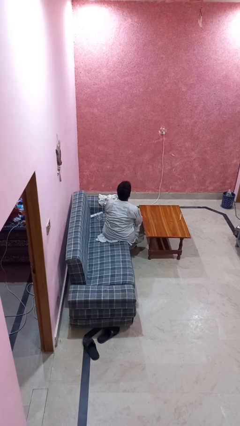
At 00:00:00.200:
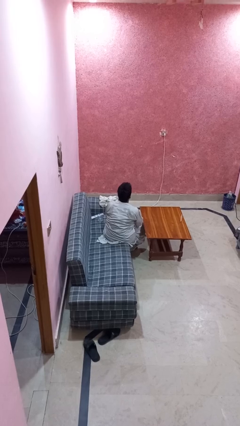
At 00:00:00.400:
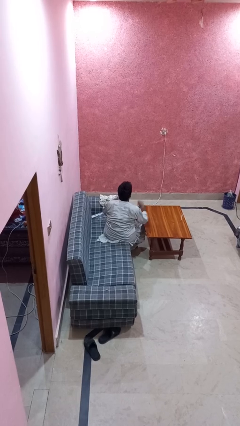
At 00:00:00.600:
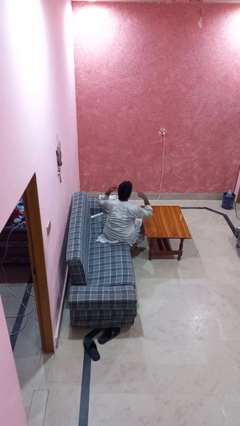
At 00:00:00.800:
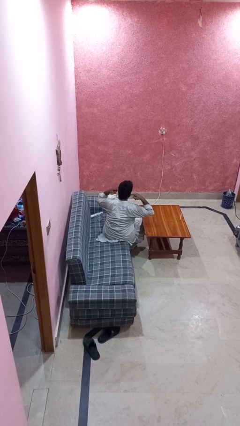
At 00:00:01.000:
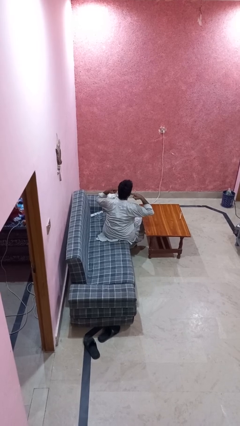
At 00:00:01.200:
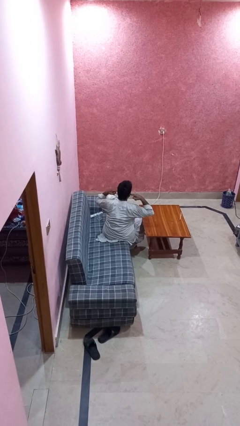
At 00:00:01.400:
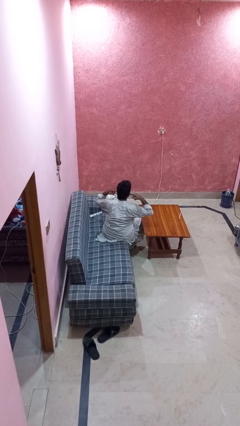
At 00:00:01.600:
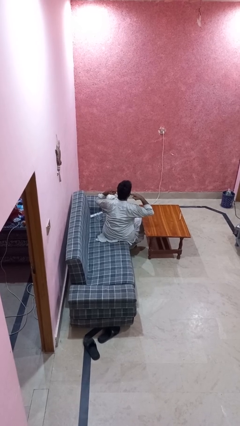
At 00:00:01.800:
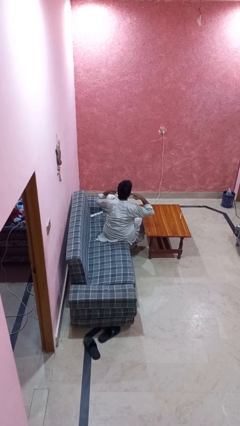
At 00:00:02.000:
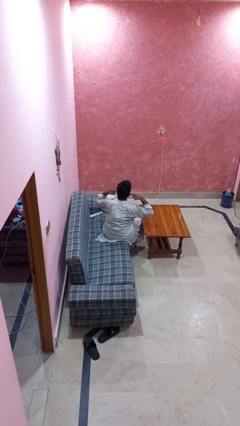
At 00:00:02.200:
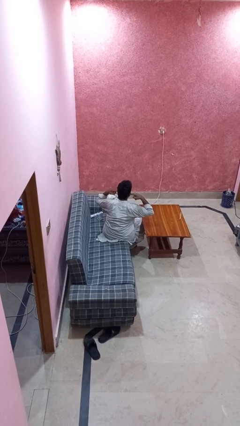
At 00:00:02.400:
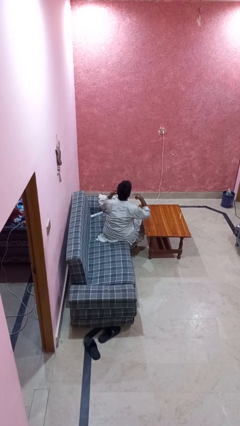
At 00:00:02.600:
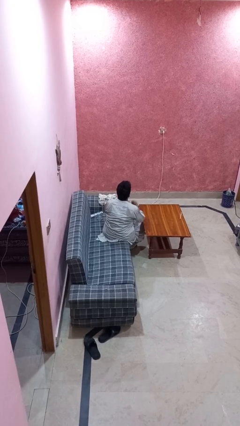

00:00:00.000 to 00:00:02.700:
person puts fingers in ear

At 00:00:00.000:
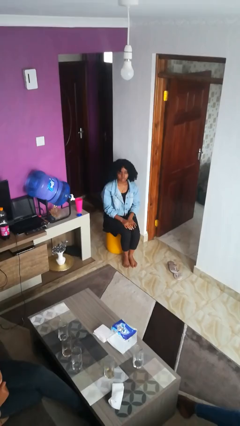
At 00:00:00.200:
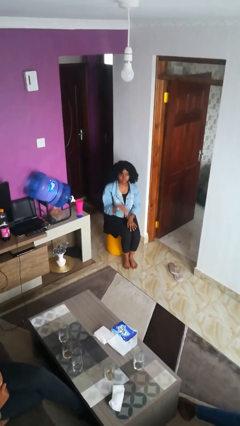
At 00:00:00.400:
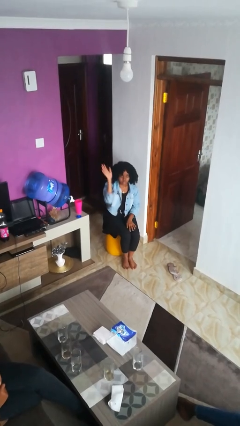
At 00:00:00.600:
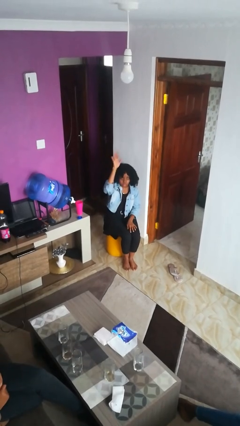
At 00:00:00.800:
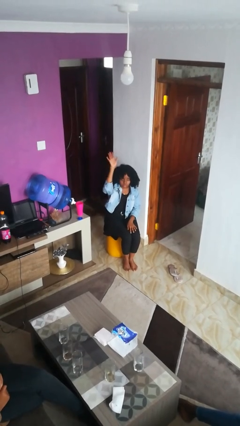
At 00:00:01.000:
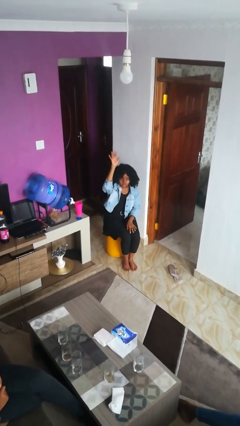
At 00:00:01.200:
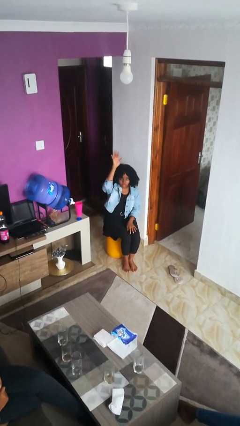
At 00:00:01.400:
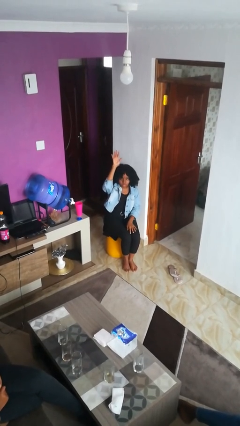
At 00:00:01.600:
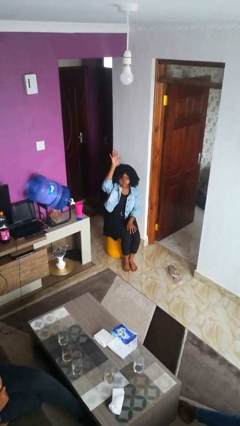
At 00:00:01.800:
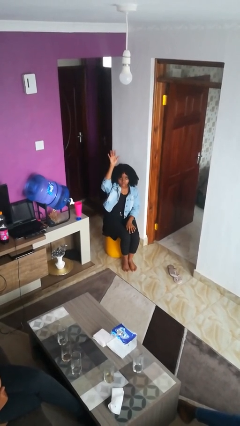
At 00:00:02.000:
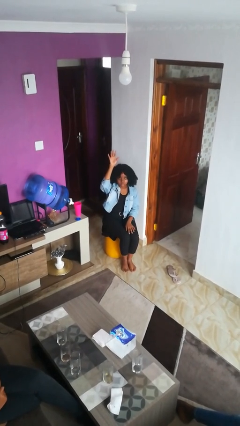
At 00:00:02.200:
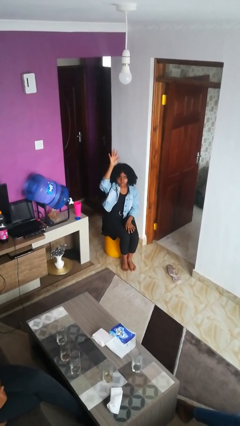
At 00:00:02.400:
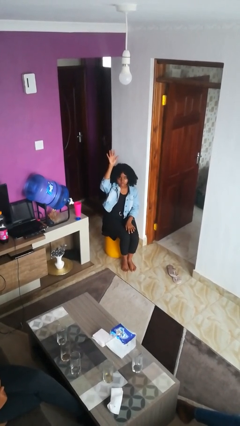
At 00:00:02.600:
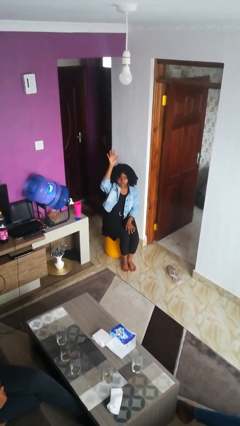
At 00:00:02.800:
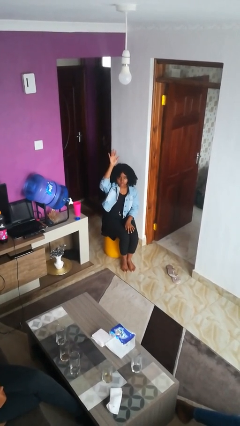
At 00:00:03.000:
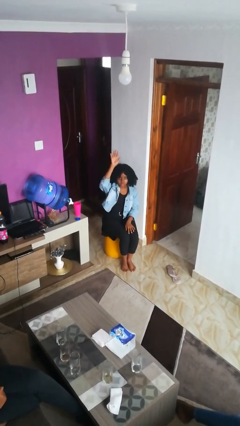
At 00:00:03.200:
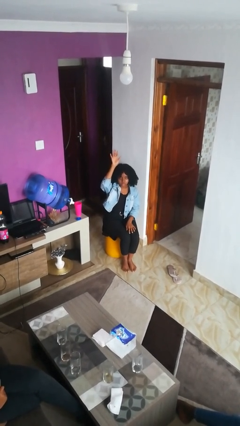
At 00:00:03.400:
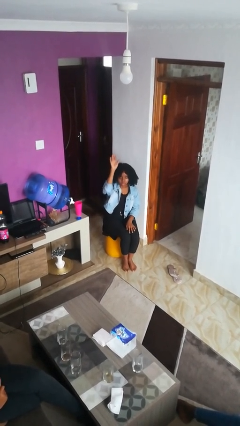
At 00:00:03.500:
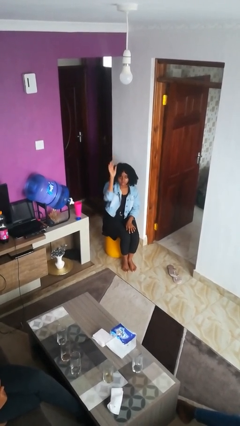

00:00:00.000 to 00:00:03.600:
person gestures raise hand

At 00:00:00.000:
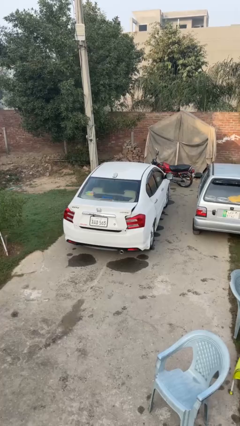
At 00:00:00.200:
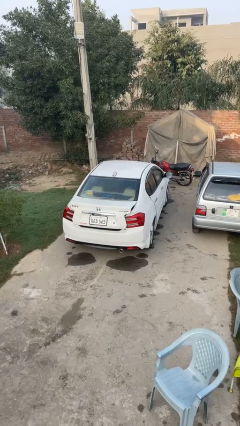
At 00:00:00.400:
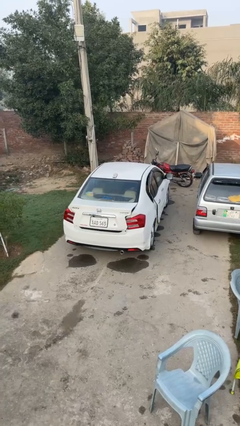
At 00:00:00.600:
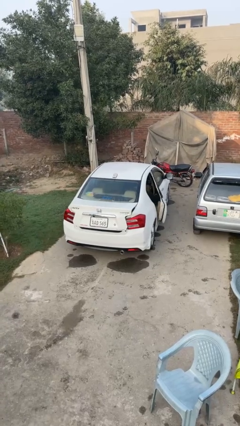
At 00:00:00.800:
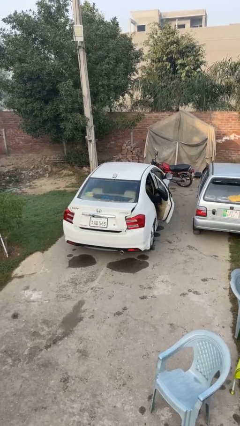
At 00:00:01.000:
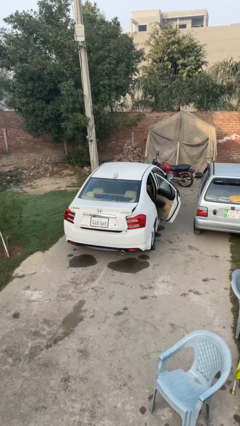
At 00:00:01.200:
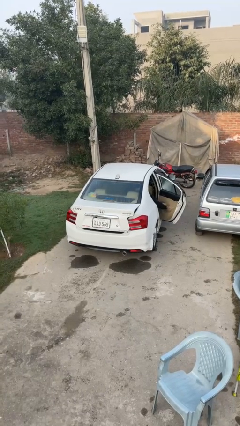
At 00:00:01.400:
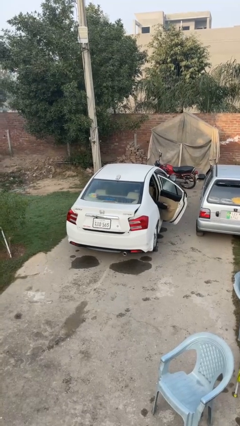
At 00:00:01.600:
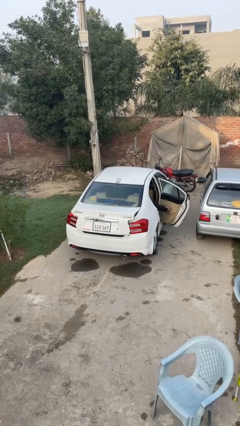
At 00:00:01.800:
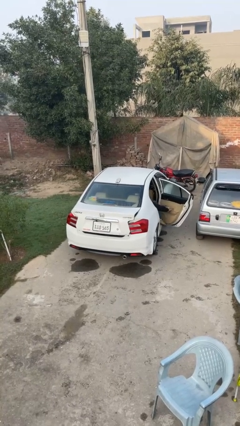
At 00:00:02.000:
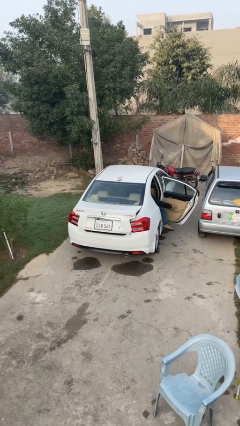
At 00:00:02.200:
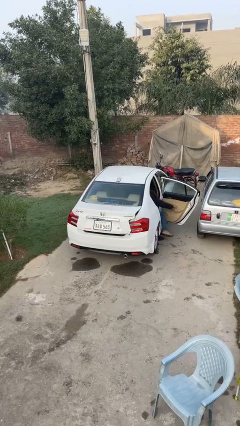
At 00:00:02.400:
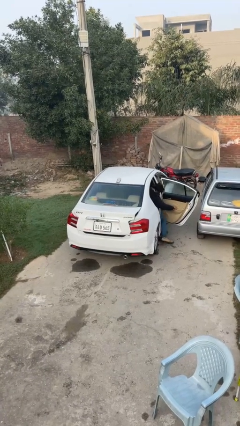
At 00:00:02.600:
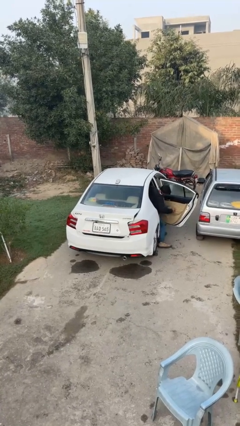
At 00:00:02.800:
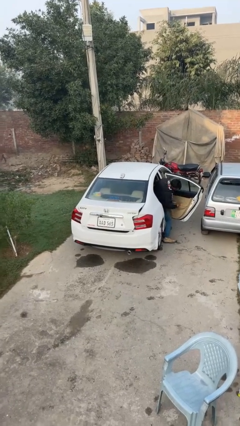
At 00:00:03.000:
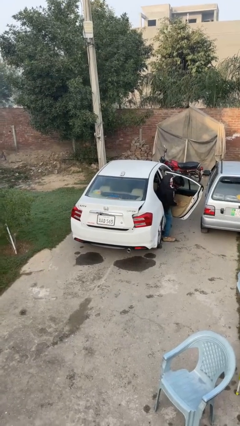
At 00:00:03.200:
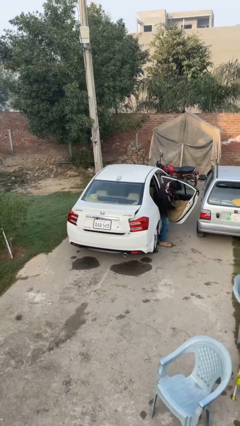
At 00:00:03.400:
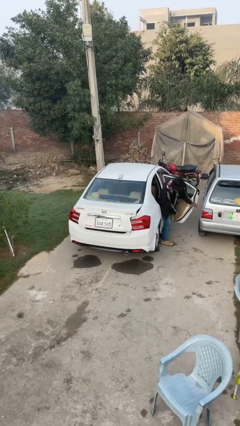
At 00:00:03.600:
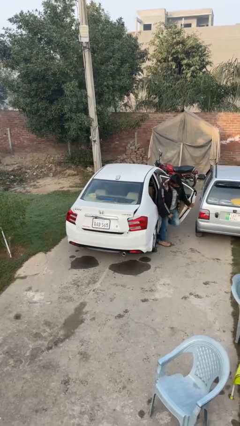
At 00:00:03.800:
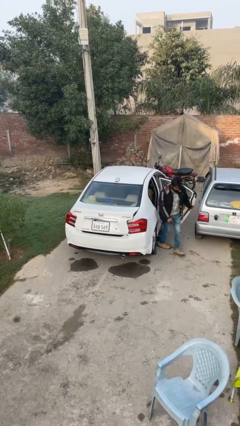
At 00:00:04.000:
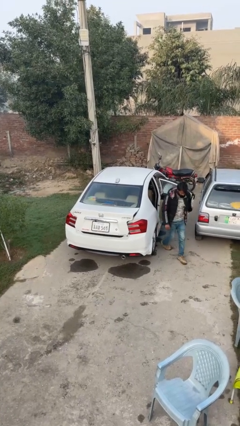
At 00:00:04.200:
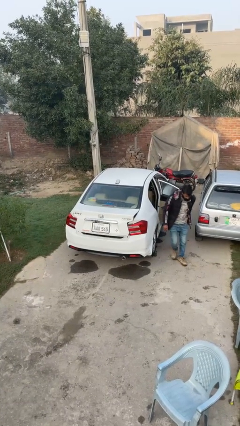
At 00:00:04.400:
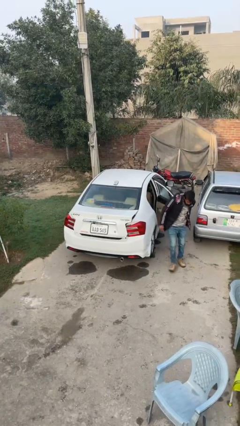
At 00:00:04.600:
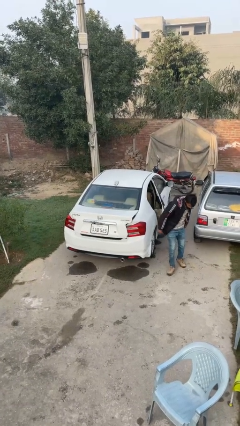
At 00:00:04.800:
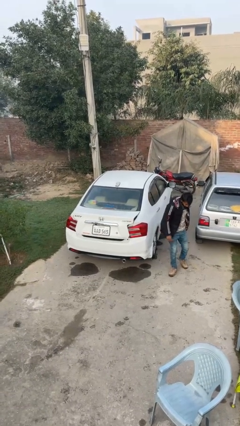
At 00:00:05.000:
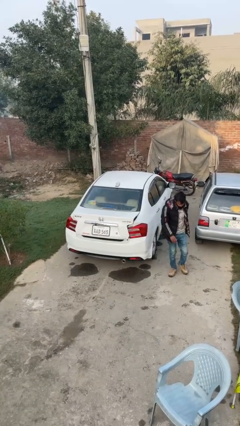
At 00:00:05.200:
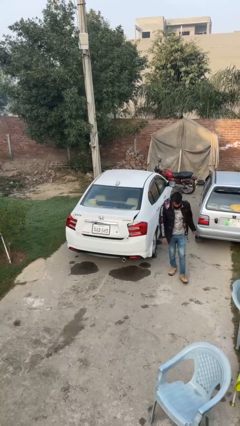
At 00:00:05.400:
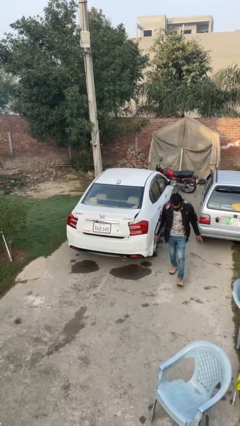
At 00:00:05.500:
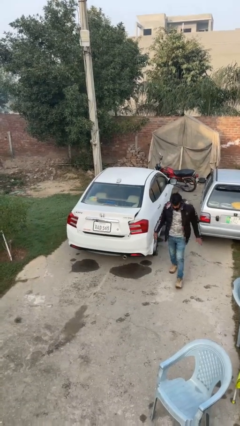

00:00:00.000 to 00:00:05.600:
car drops off person

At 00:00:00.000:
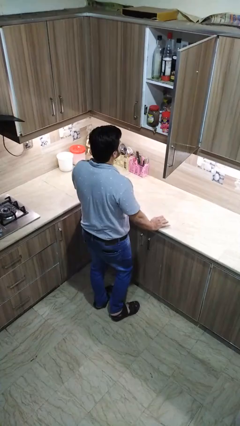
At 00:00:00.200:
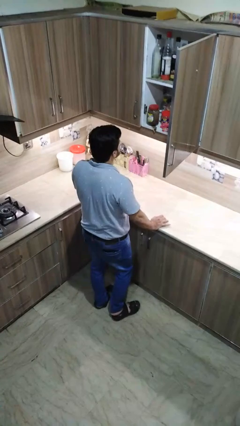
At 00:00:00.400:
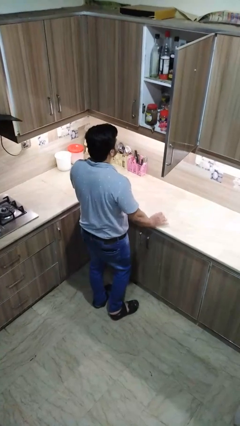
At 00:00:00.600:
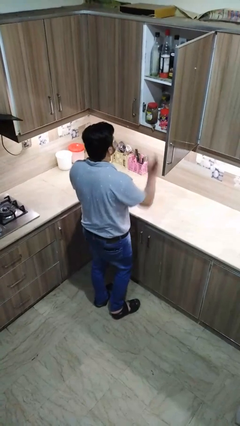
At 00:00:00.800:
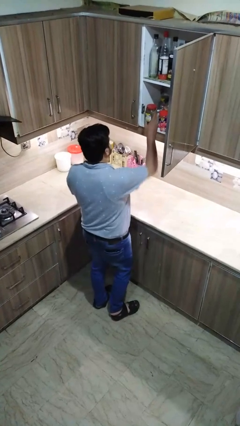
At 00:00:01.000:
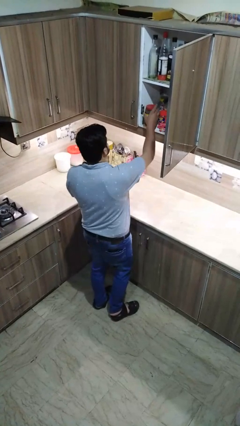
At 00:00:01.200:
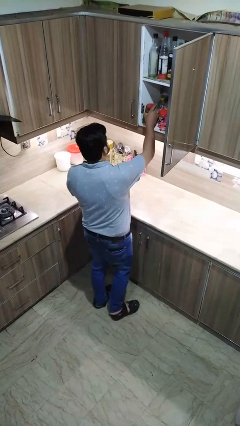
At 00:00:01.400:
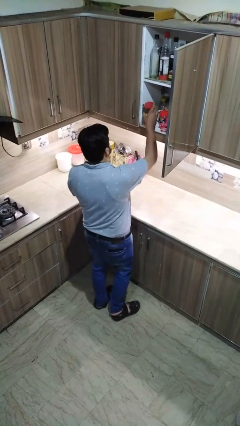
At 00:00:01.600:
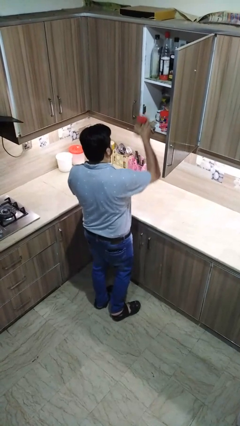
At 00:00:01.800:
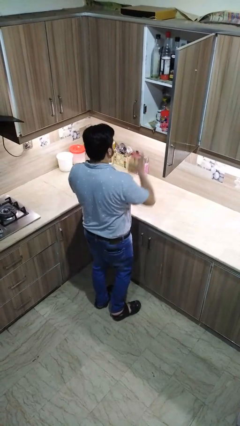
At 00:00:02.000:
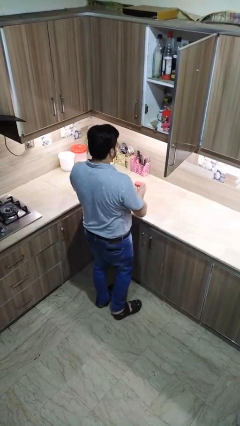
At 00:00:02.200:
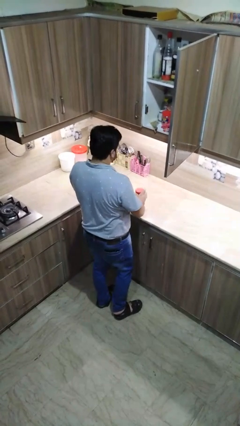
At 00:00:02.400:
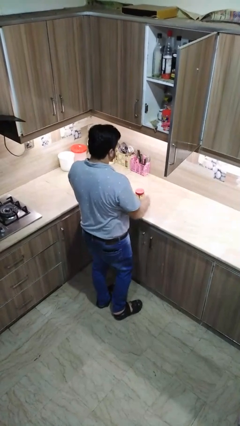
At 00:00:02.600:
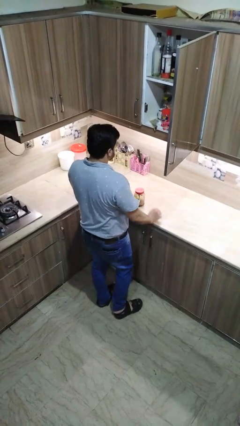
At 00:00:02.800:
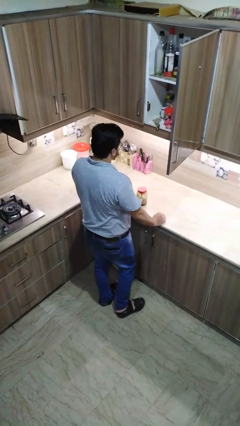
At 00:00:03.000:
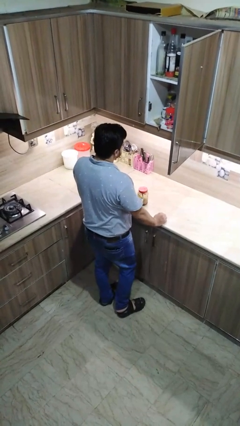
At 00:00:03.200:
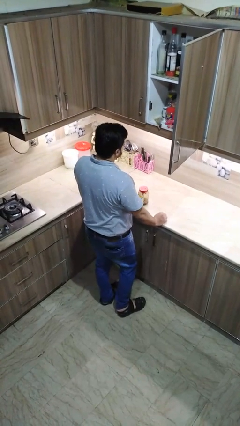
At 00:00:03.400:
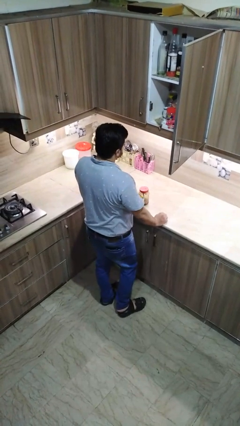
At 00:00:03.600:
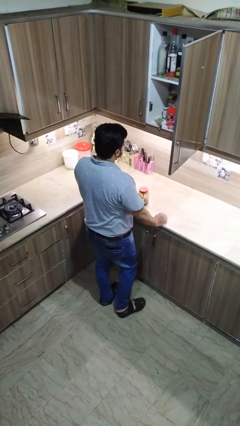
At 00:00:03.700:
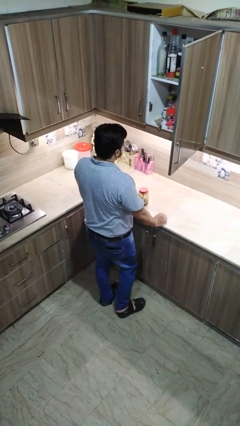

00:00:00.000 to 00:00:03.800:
person puts object in cabinet

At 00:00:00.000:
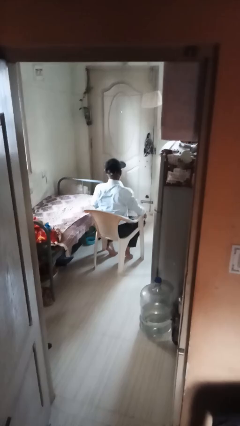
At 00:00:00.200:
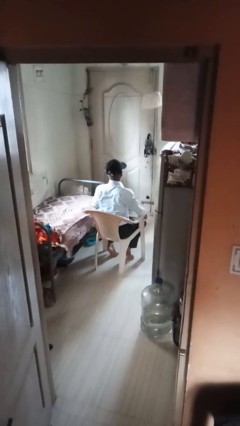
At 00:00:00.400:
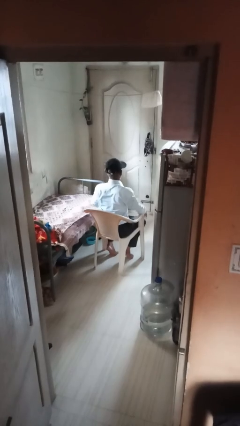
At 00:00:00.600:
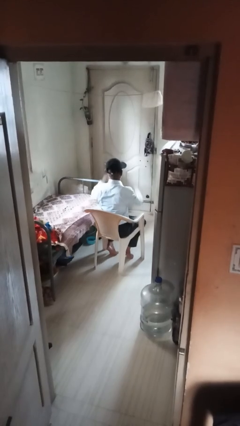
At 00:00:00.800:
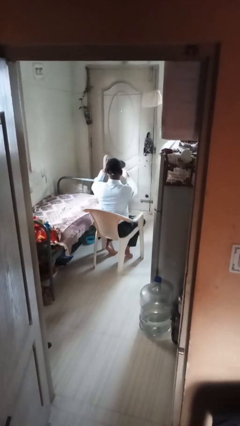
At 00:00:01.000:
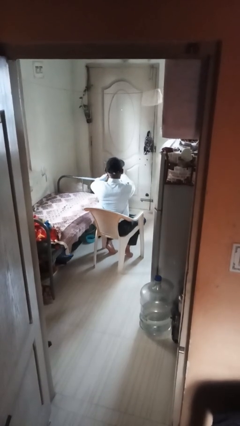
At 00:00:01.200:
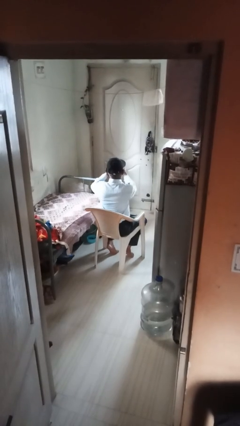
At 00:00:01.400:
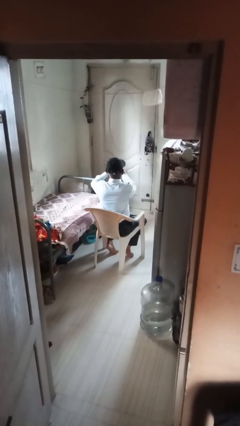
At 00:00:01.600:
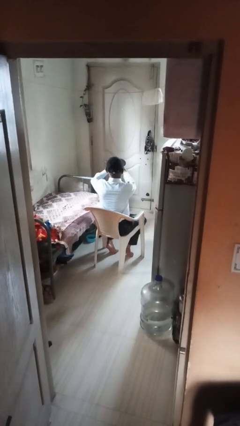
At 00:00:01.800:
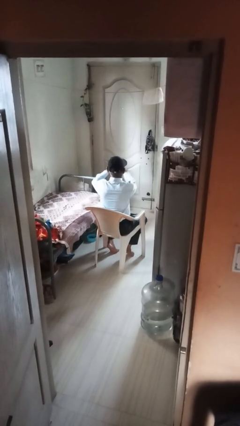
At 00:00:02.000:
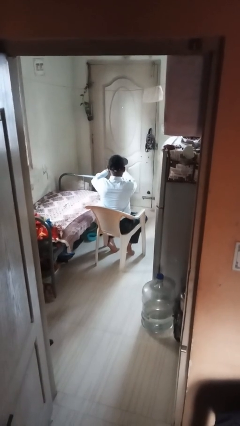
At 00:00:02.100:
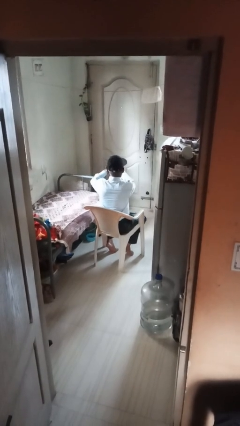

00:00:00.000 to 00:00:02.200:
person claps hands
